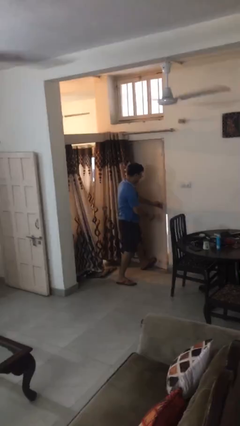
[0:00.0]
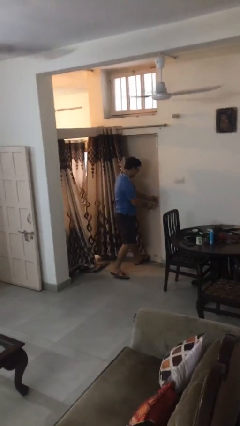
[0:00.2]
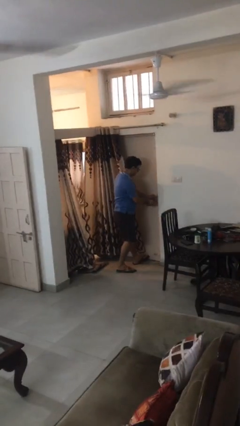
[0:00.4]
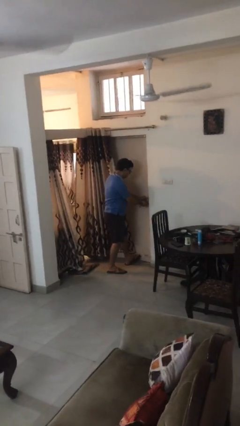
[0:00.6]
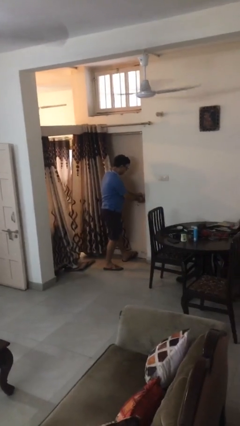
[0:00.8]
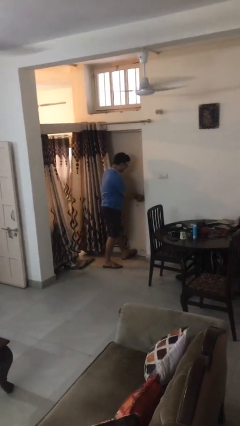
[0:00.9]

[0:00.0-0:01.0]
person closes facility door

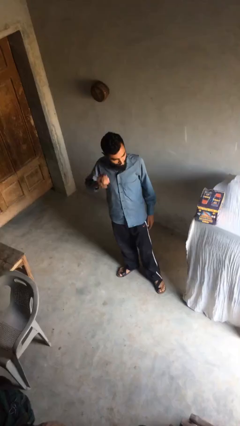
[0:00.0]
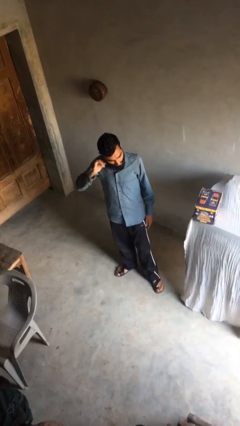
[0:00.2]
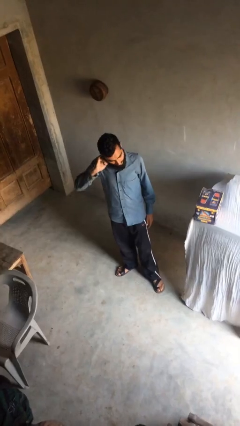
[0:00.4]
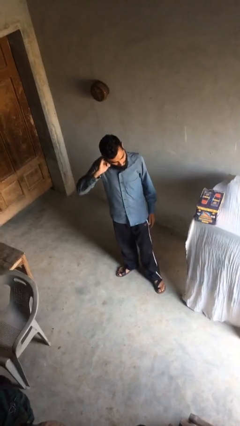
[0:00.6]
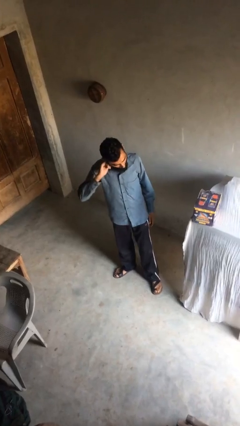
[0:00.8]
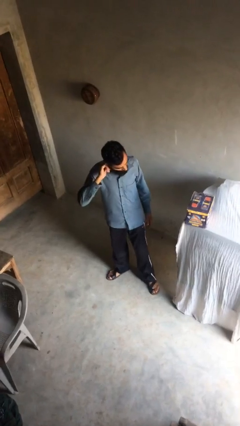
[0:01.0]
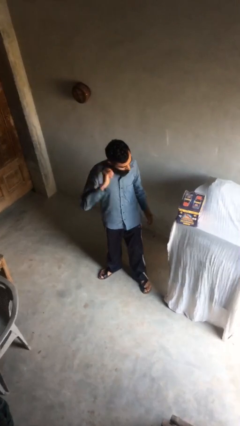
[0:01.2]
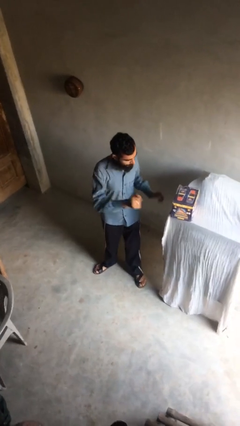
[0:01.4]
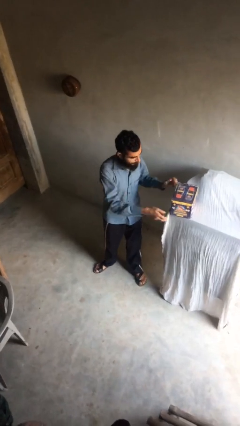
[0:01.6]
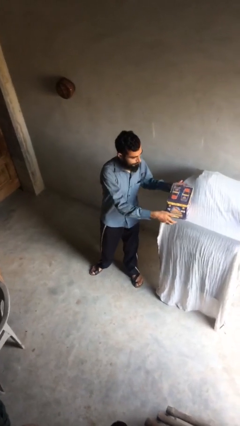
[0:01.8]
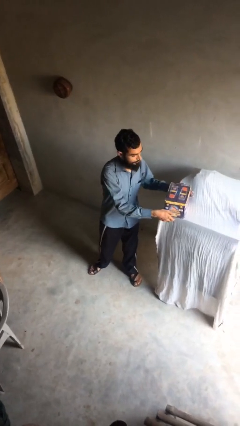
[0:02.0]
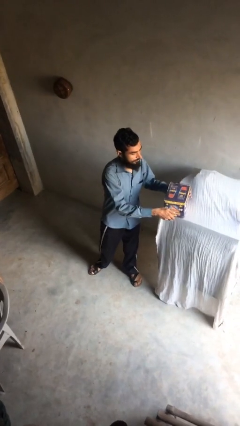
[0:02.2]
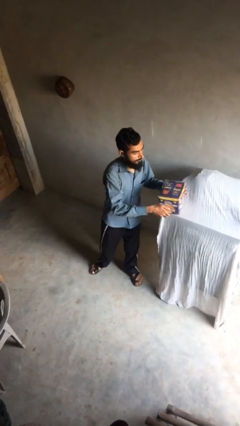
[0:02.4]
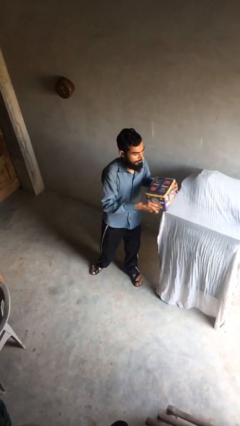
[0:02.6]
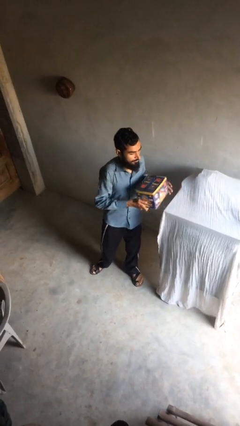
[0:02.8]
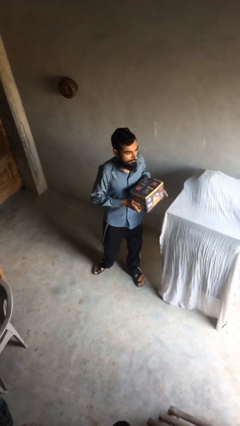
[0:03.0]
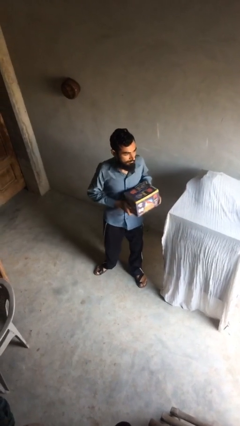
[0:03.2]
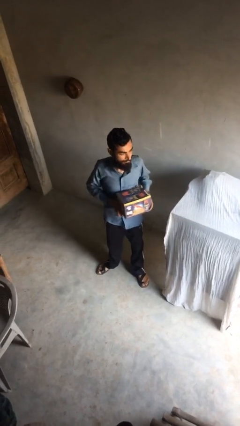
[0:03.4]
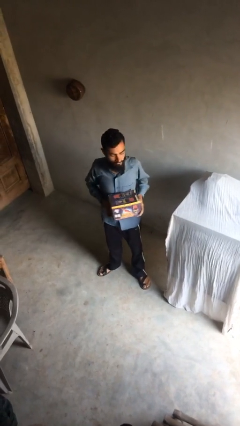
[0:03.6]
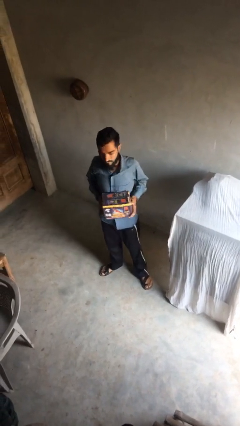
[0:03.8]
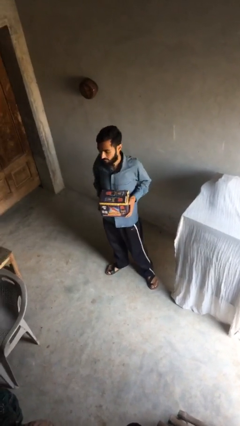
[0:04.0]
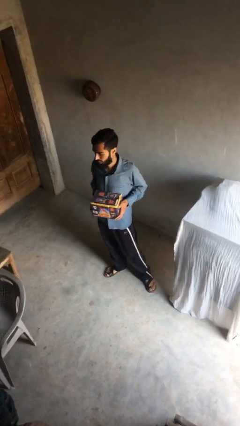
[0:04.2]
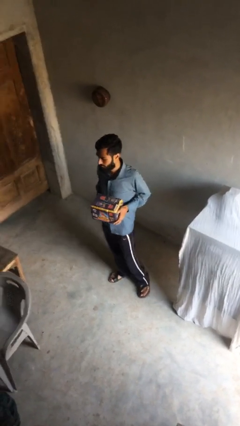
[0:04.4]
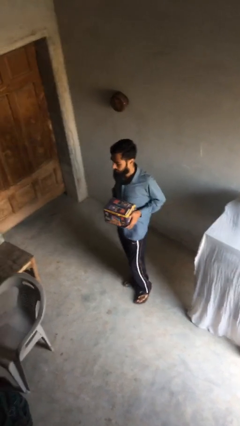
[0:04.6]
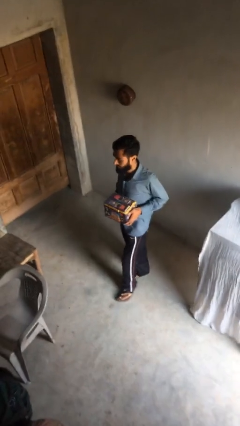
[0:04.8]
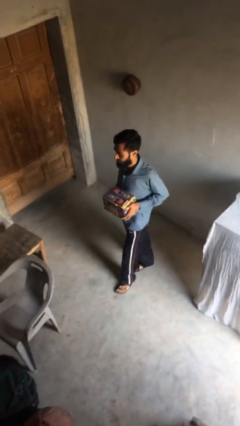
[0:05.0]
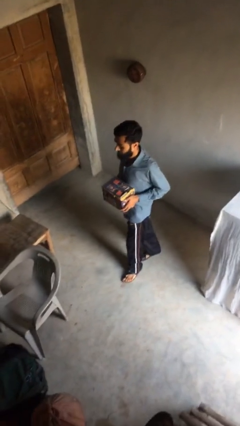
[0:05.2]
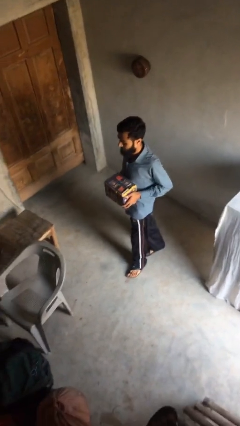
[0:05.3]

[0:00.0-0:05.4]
person picks up object from shelf

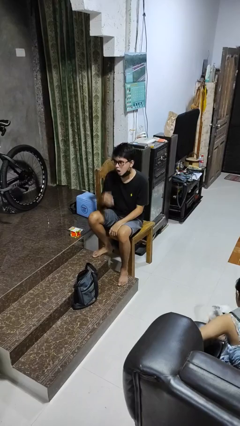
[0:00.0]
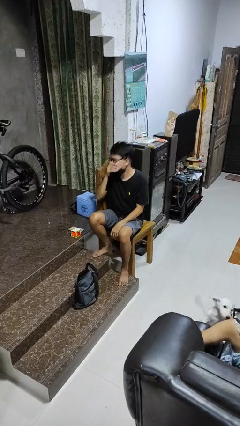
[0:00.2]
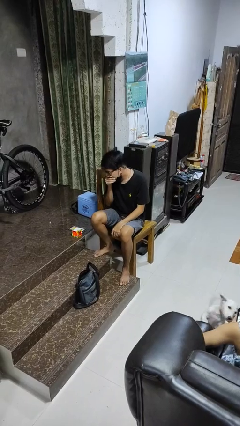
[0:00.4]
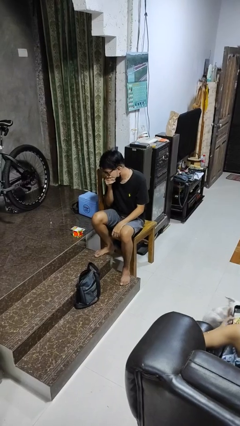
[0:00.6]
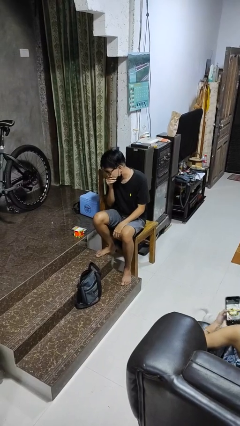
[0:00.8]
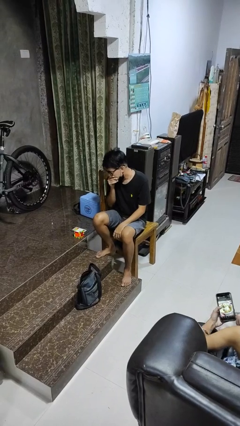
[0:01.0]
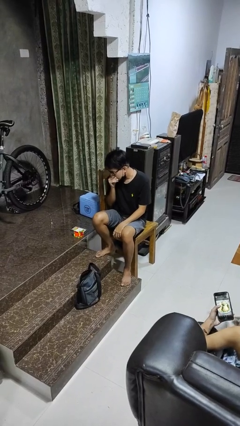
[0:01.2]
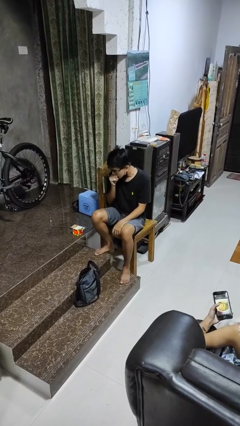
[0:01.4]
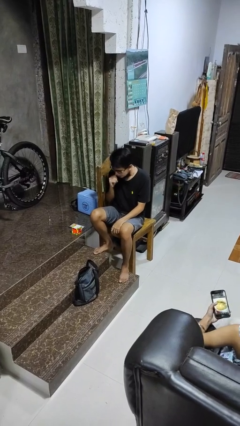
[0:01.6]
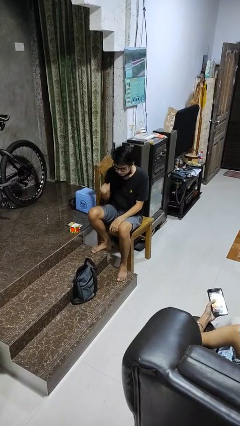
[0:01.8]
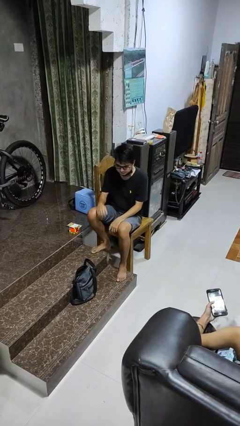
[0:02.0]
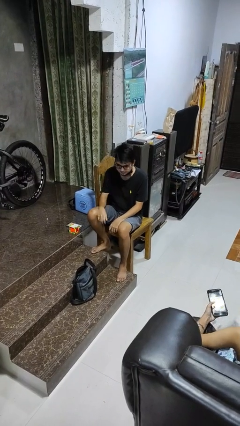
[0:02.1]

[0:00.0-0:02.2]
person sneezes into hand

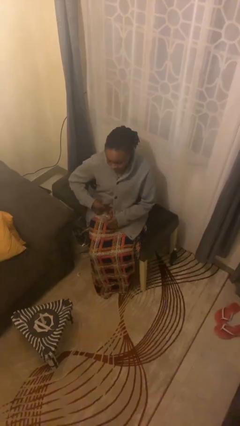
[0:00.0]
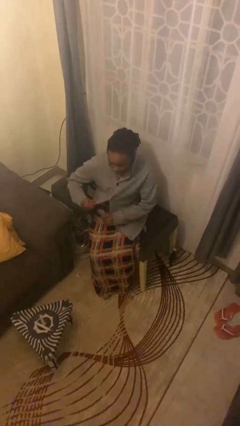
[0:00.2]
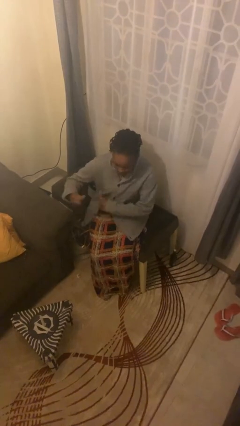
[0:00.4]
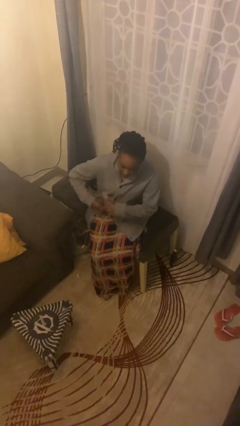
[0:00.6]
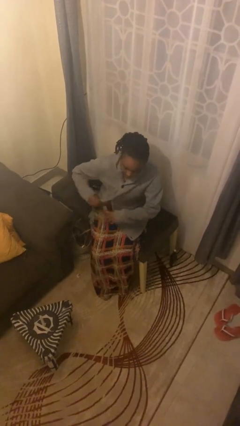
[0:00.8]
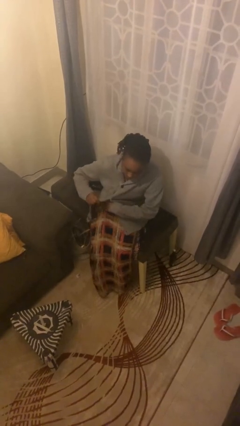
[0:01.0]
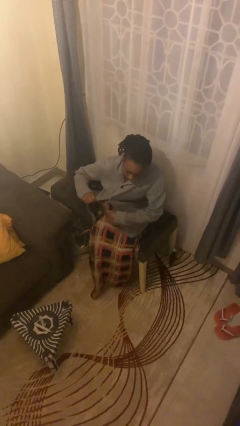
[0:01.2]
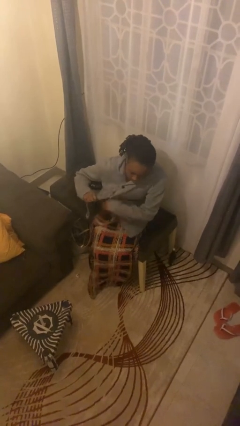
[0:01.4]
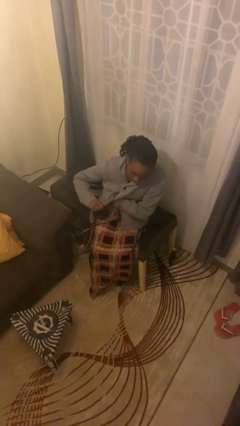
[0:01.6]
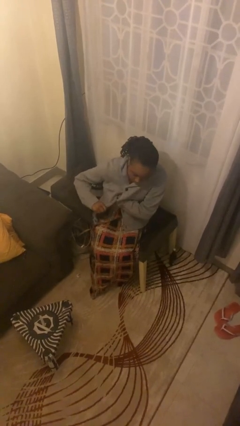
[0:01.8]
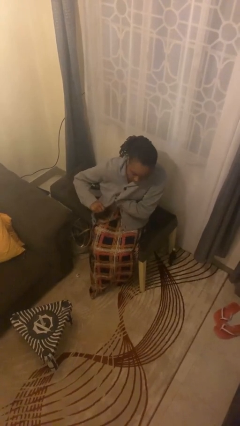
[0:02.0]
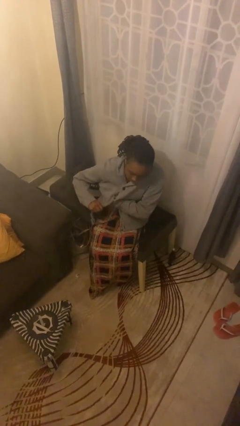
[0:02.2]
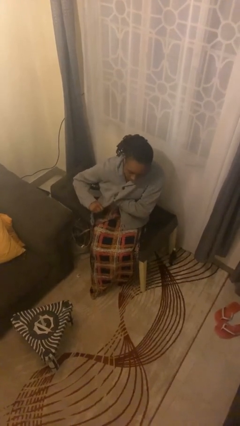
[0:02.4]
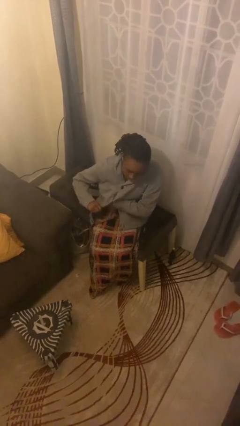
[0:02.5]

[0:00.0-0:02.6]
person applies deodorant

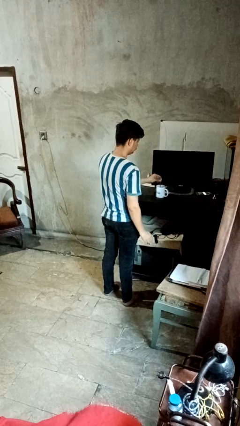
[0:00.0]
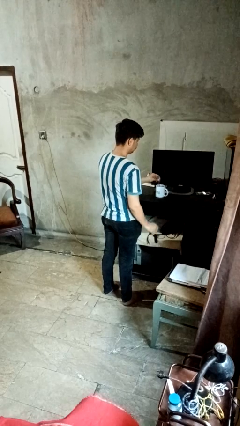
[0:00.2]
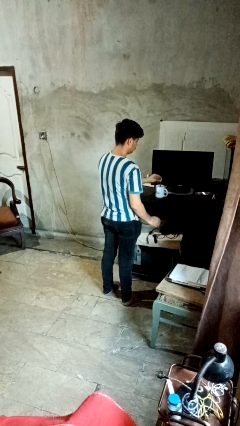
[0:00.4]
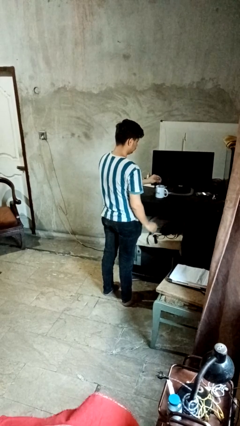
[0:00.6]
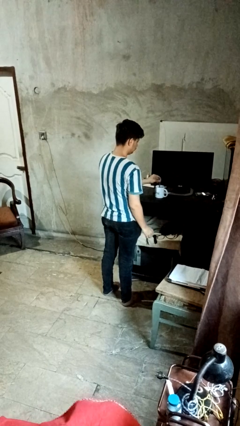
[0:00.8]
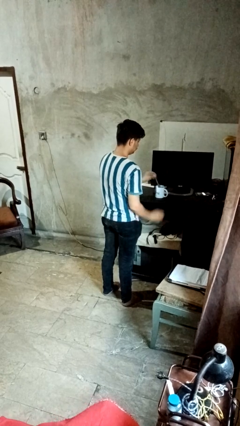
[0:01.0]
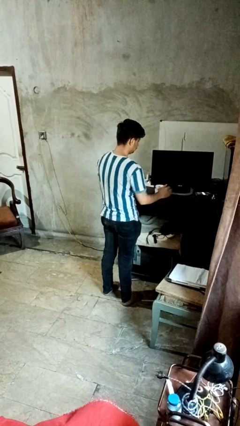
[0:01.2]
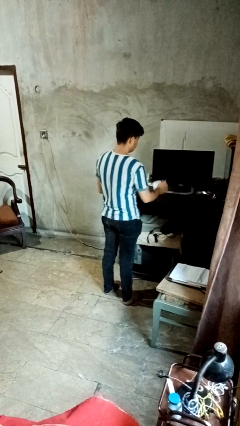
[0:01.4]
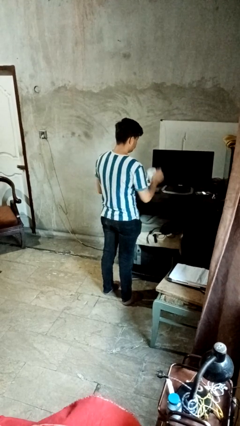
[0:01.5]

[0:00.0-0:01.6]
person stirs mug

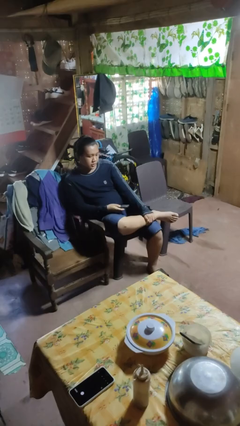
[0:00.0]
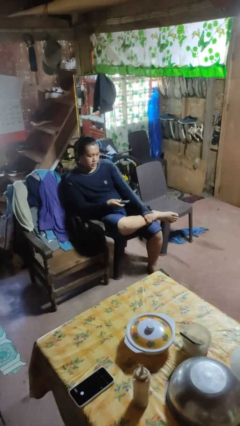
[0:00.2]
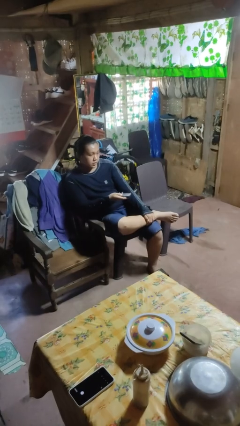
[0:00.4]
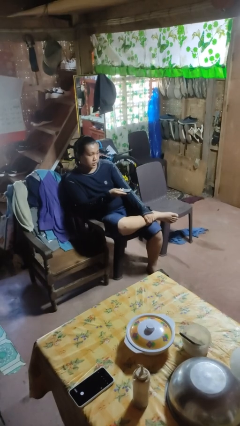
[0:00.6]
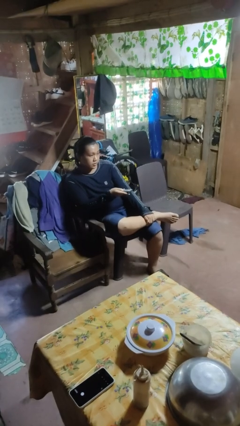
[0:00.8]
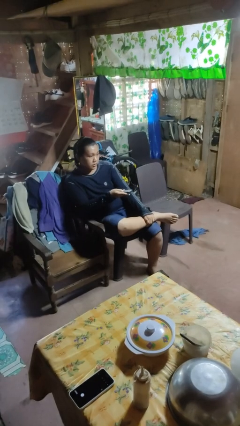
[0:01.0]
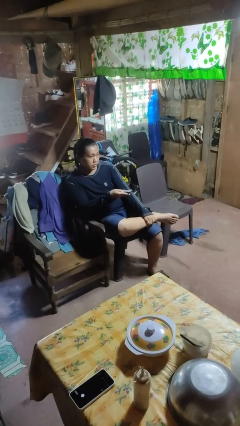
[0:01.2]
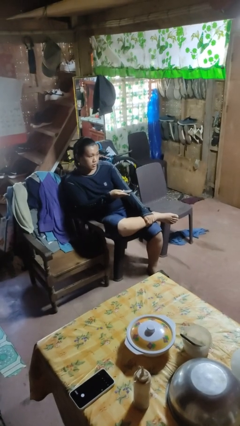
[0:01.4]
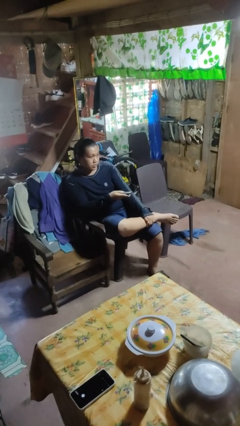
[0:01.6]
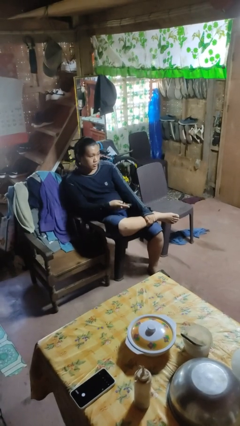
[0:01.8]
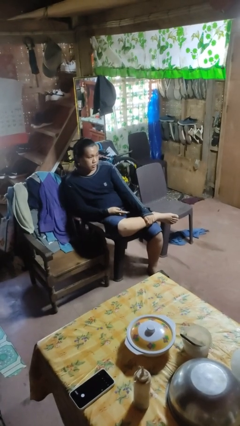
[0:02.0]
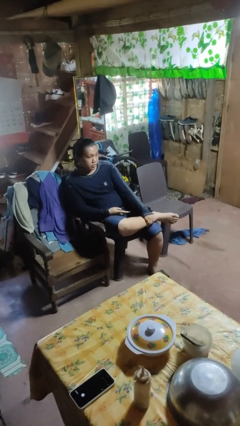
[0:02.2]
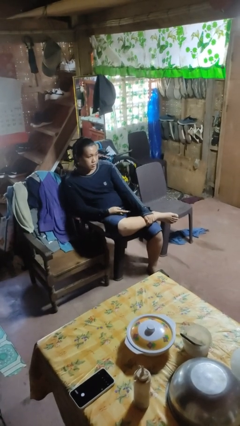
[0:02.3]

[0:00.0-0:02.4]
person uses television remote

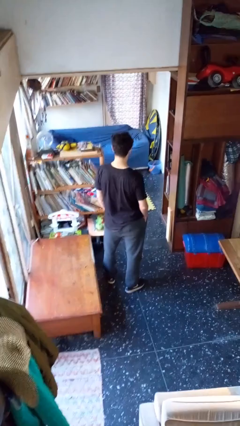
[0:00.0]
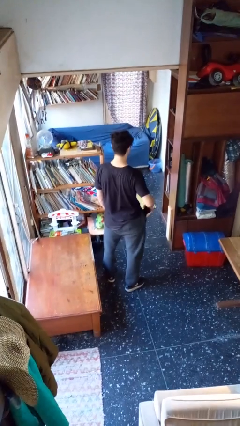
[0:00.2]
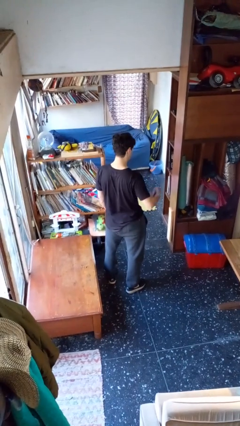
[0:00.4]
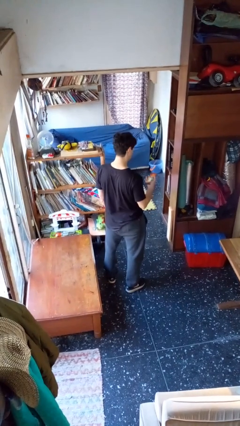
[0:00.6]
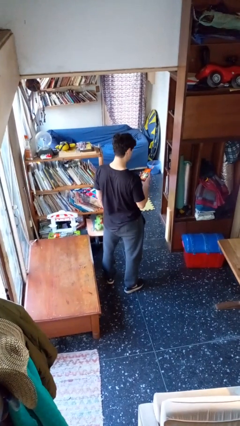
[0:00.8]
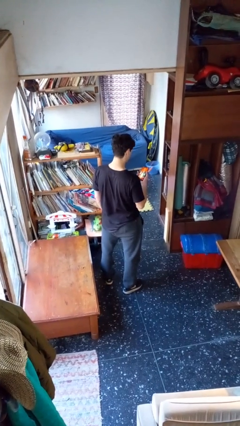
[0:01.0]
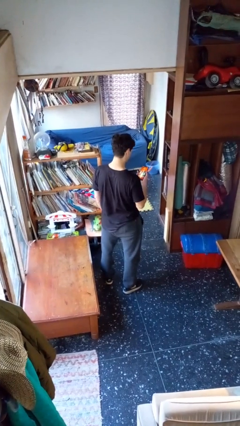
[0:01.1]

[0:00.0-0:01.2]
person takes phone from pocket

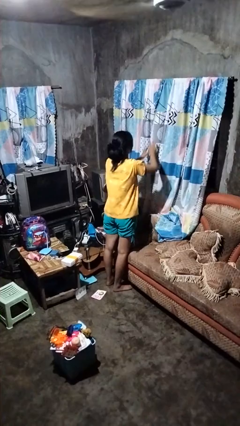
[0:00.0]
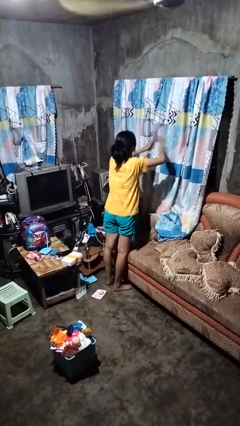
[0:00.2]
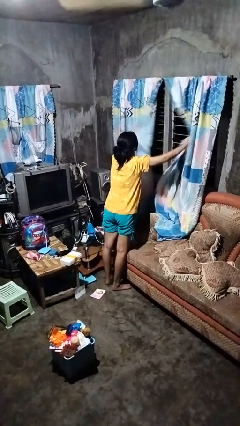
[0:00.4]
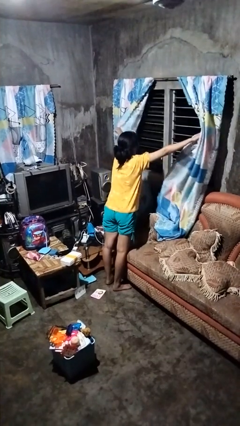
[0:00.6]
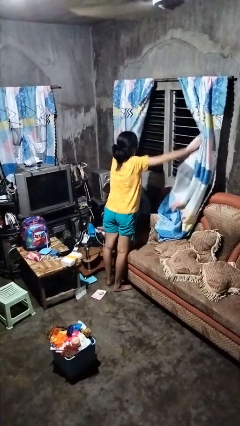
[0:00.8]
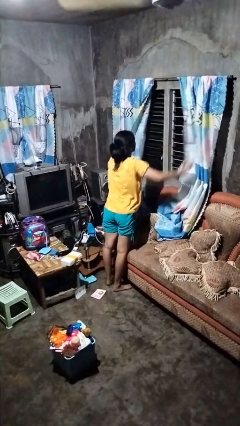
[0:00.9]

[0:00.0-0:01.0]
person opens curtains
